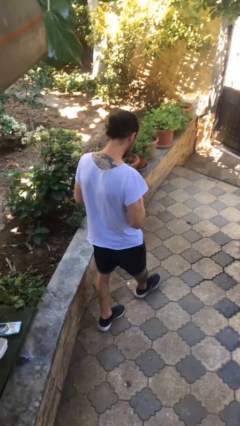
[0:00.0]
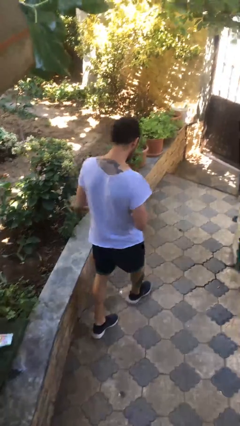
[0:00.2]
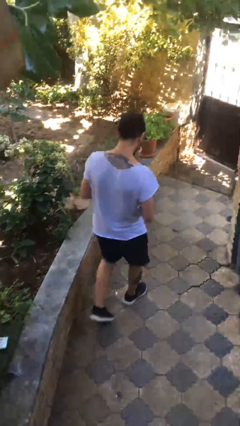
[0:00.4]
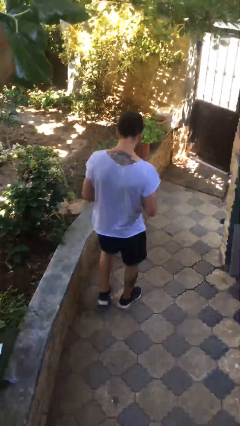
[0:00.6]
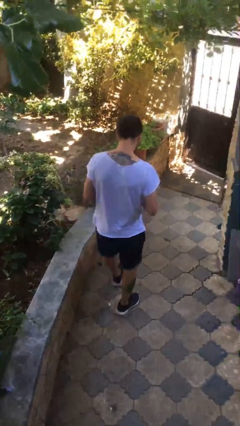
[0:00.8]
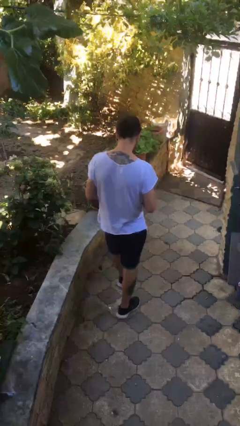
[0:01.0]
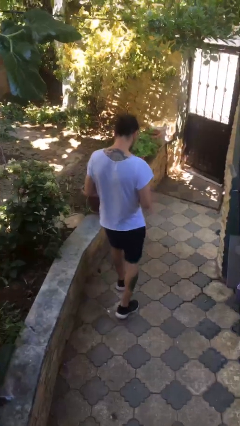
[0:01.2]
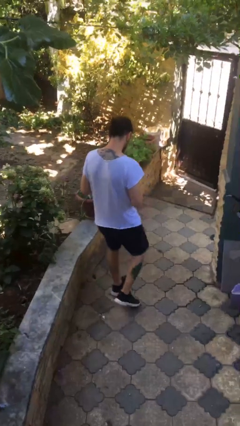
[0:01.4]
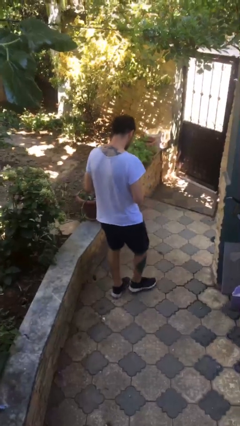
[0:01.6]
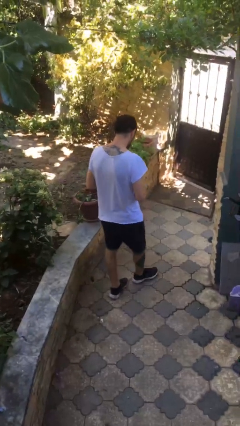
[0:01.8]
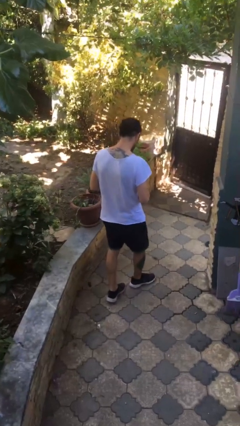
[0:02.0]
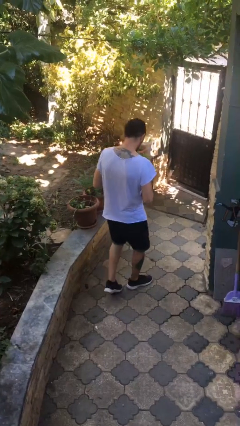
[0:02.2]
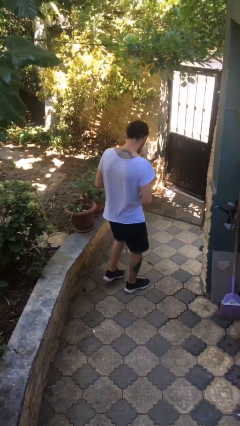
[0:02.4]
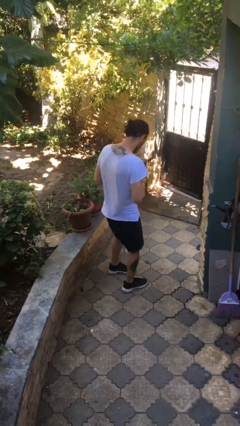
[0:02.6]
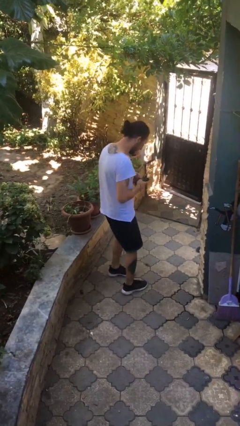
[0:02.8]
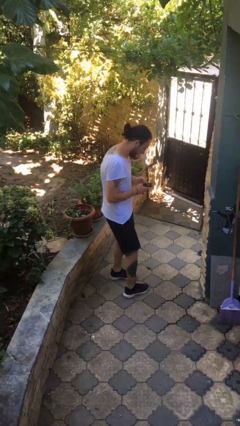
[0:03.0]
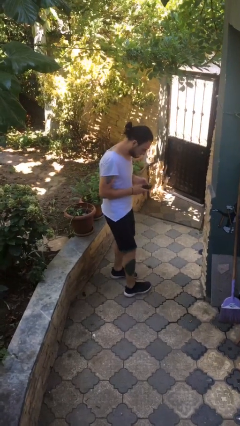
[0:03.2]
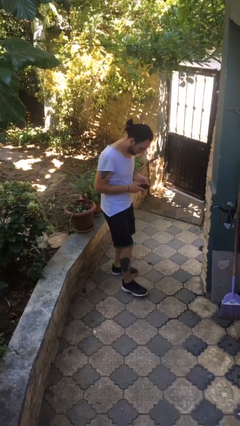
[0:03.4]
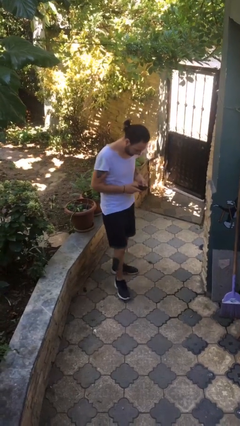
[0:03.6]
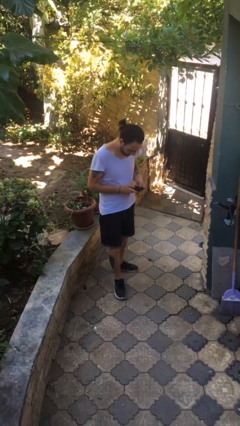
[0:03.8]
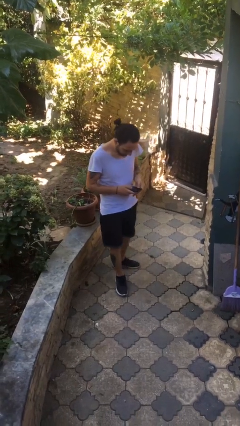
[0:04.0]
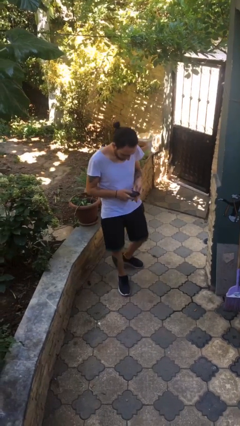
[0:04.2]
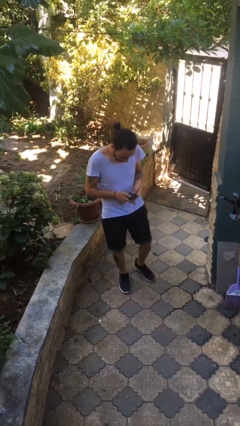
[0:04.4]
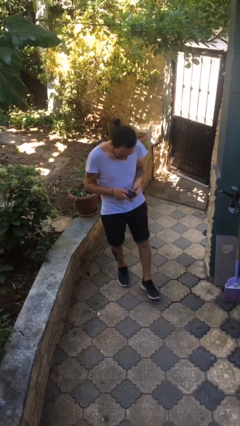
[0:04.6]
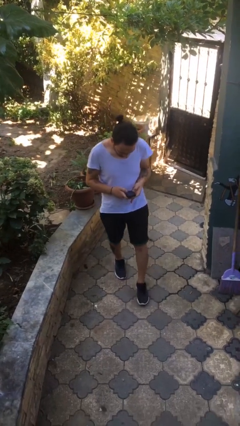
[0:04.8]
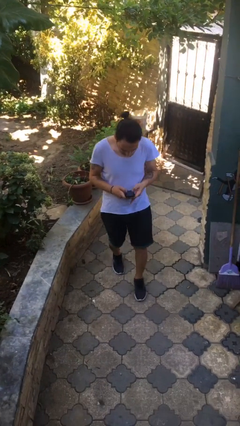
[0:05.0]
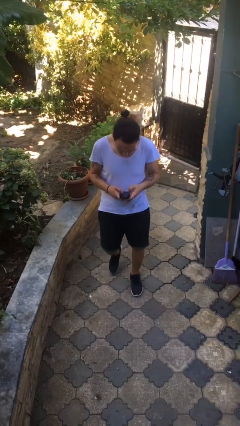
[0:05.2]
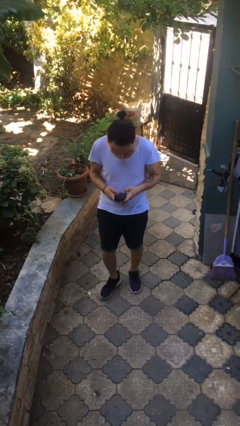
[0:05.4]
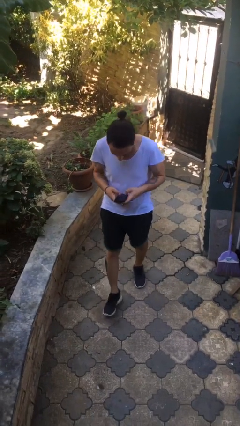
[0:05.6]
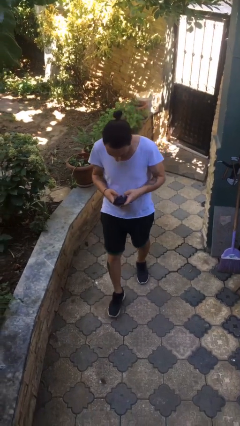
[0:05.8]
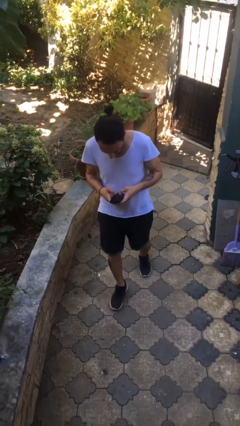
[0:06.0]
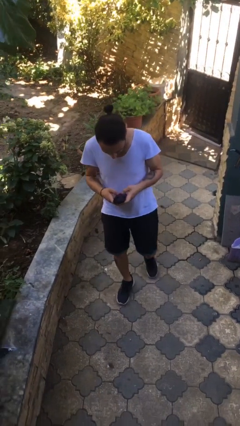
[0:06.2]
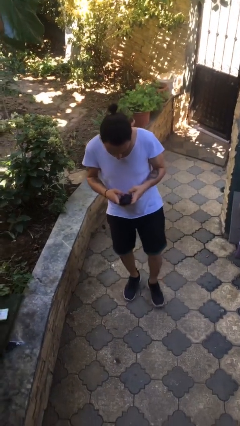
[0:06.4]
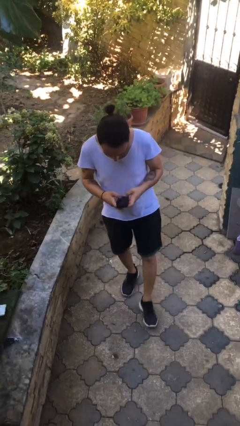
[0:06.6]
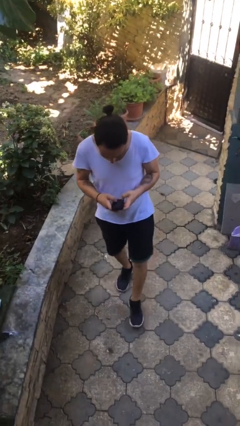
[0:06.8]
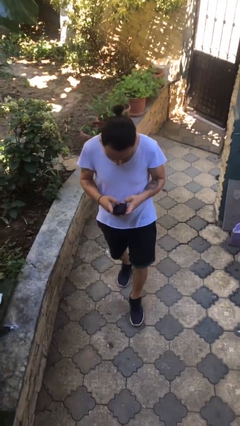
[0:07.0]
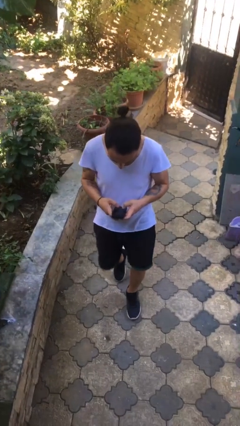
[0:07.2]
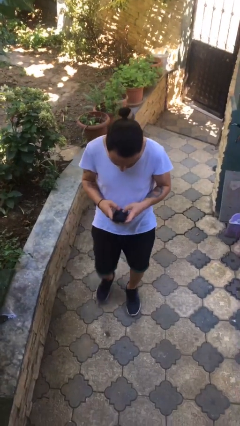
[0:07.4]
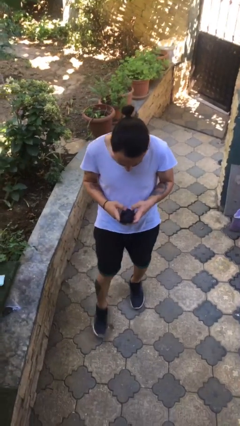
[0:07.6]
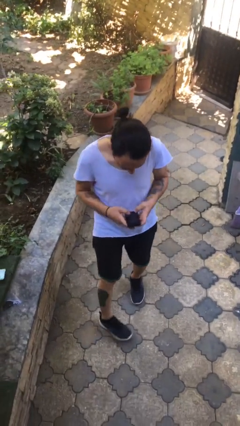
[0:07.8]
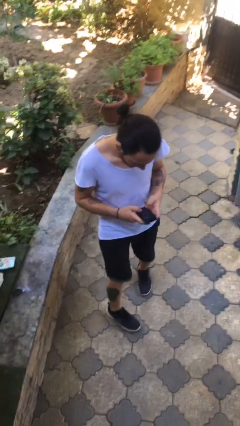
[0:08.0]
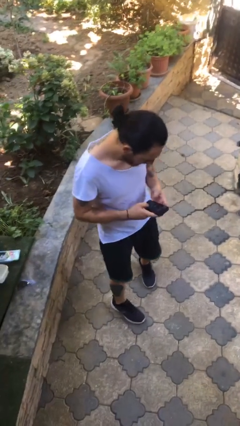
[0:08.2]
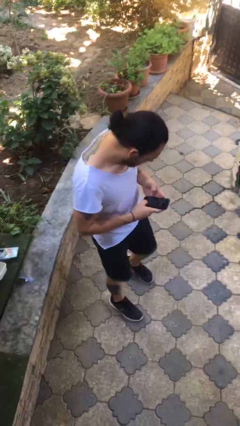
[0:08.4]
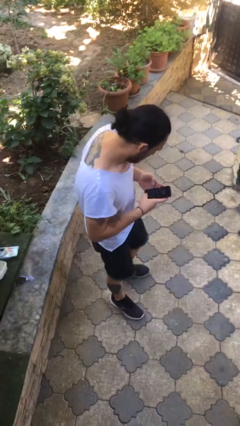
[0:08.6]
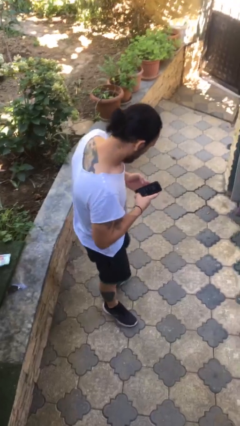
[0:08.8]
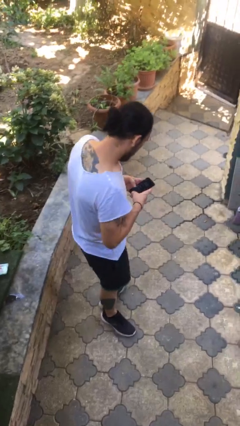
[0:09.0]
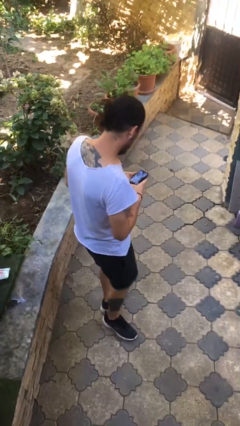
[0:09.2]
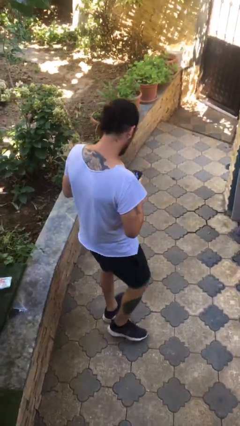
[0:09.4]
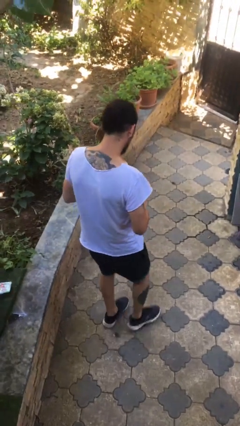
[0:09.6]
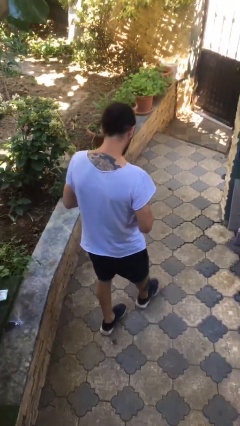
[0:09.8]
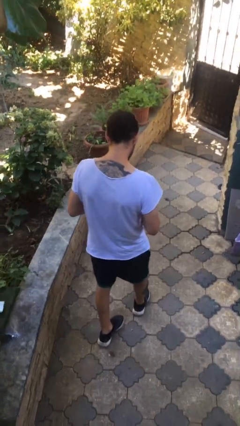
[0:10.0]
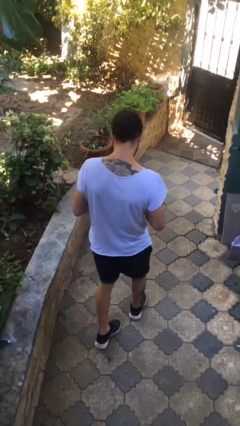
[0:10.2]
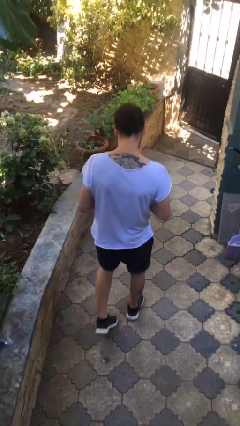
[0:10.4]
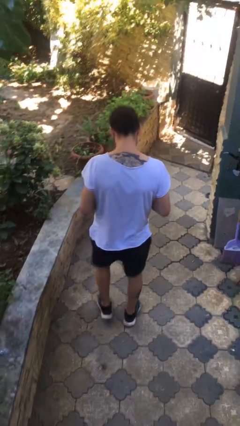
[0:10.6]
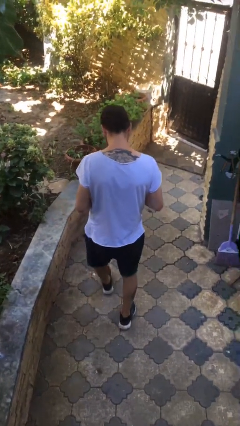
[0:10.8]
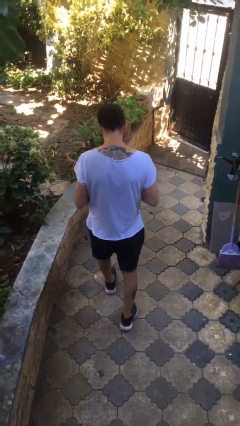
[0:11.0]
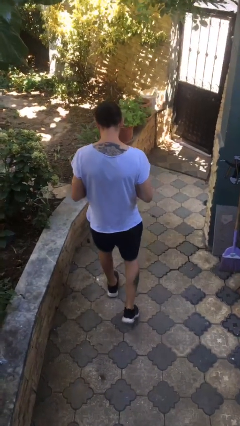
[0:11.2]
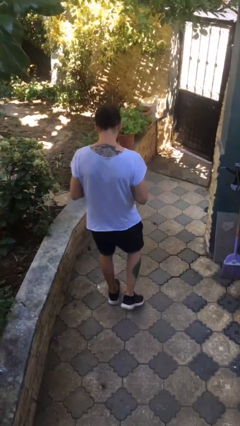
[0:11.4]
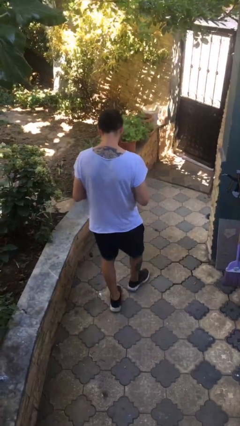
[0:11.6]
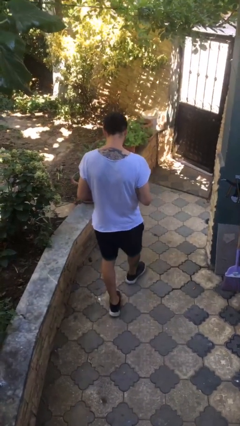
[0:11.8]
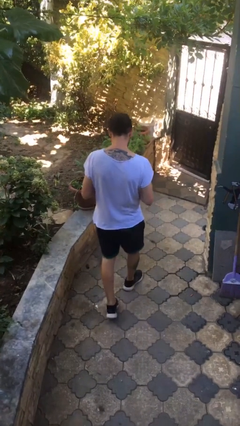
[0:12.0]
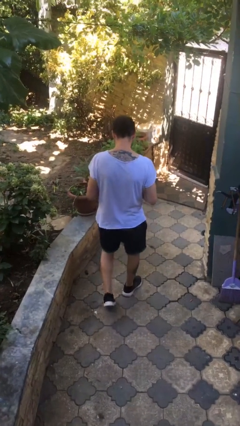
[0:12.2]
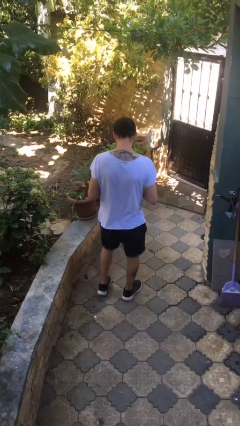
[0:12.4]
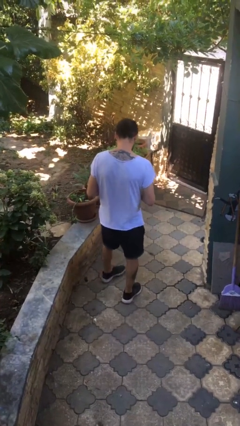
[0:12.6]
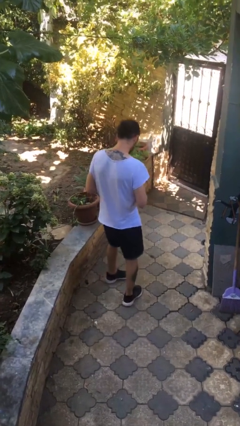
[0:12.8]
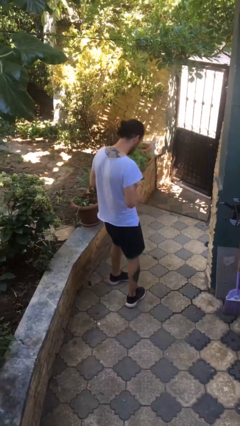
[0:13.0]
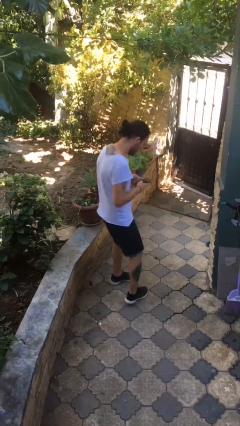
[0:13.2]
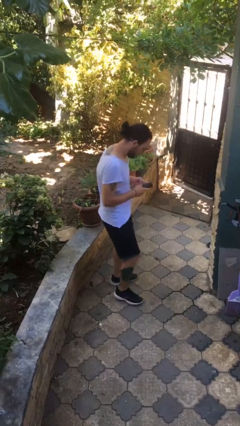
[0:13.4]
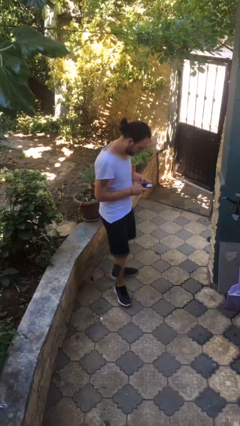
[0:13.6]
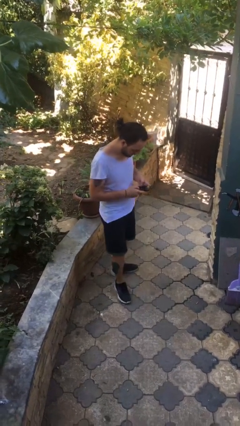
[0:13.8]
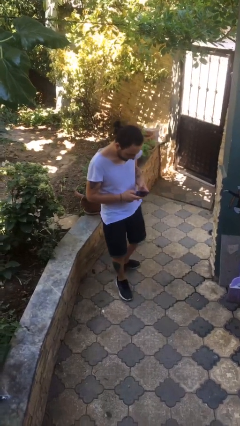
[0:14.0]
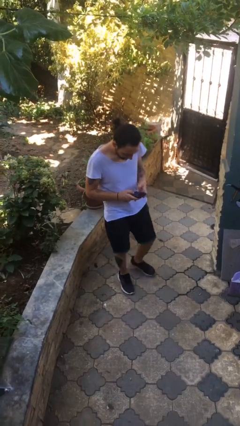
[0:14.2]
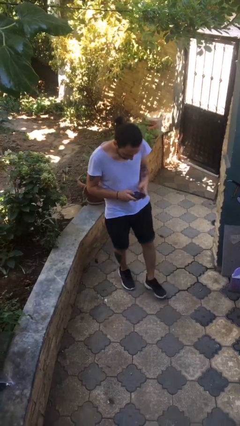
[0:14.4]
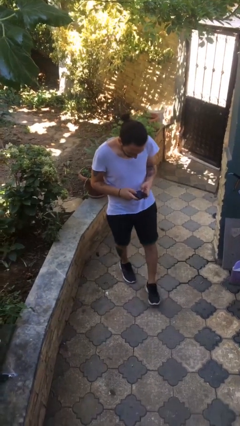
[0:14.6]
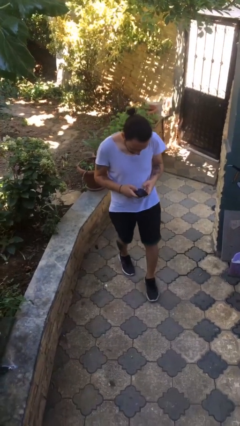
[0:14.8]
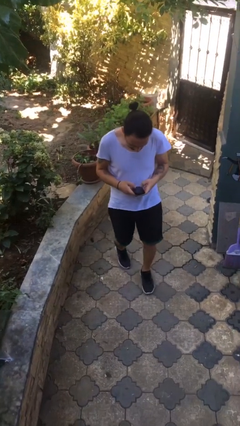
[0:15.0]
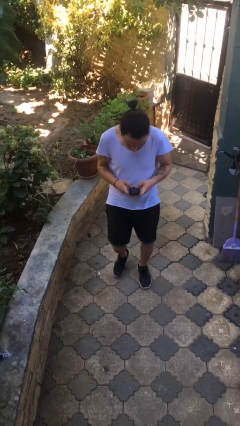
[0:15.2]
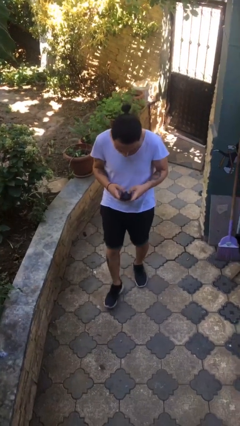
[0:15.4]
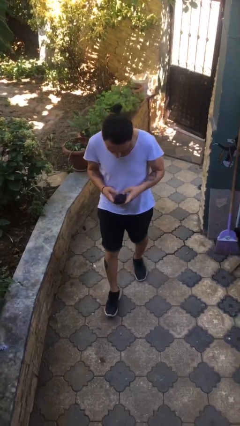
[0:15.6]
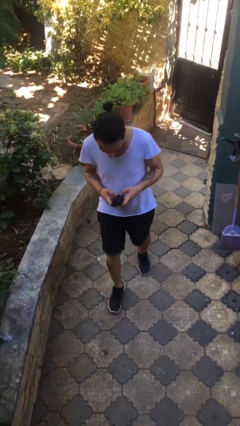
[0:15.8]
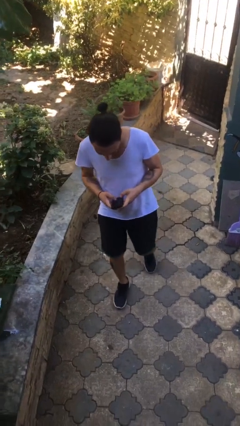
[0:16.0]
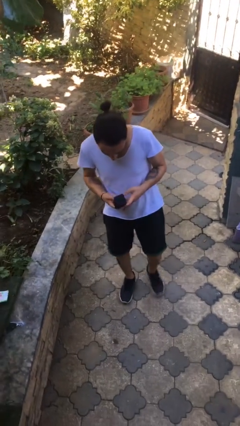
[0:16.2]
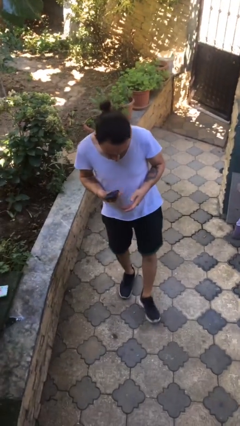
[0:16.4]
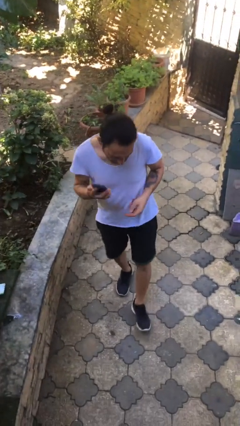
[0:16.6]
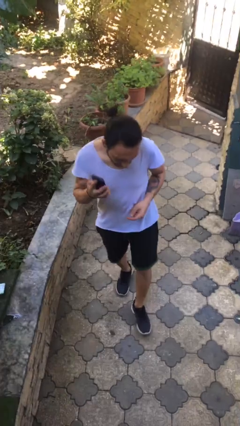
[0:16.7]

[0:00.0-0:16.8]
person texts on phone

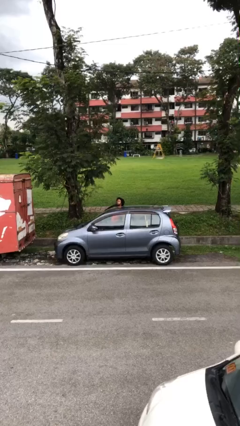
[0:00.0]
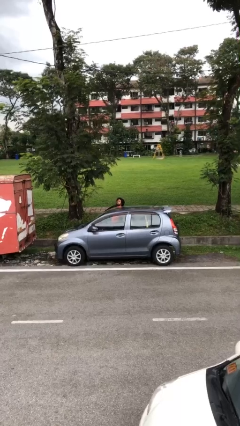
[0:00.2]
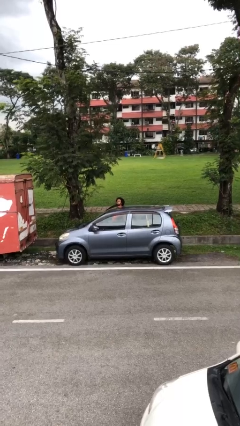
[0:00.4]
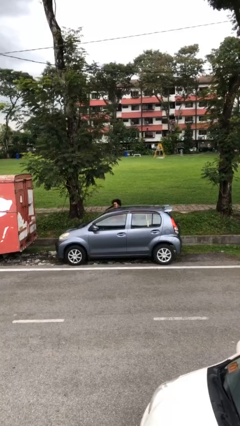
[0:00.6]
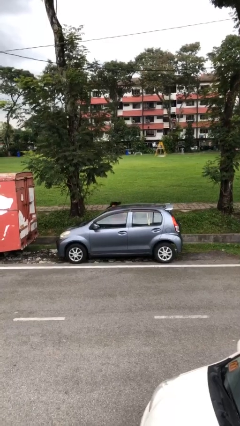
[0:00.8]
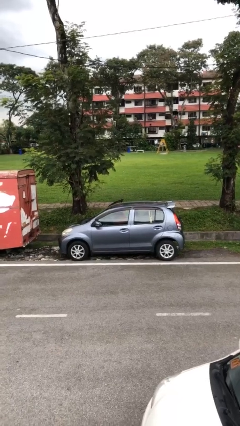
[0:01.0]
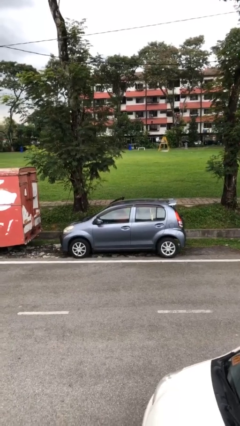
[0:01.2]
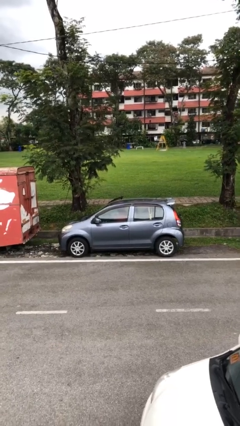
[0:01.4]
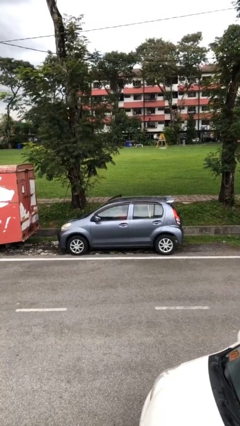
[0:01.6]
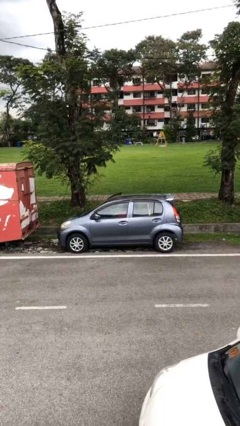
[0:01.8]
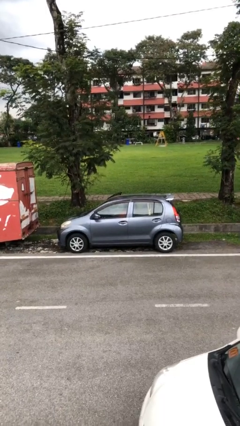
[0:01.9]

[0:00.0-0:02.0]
person enters car
